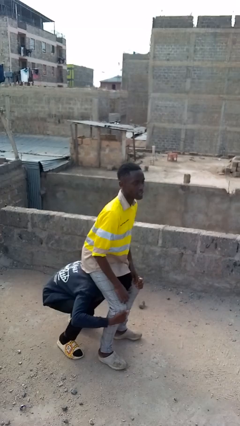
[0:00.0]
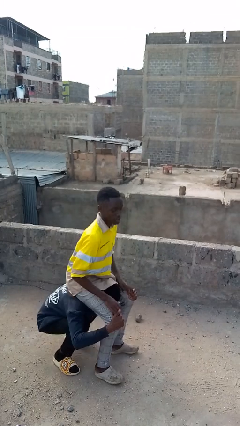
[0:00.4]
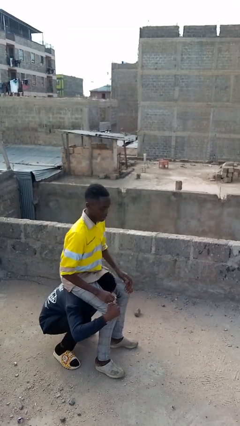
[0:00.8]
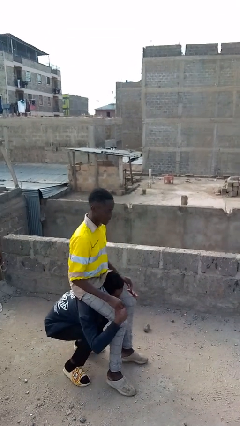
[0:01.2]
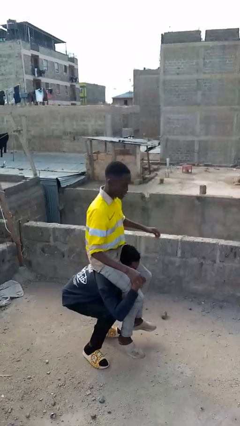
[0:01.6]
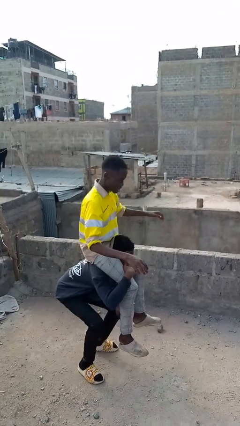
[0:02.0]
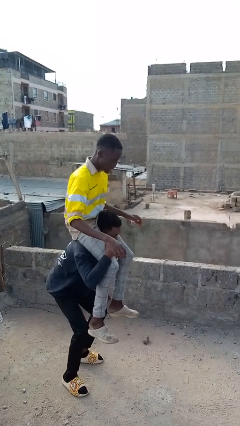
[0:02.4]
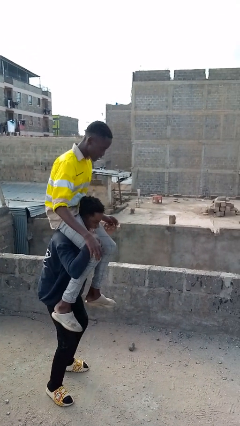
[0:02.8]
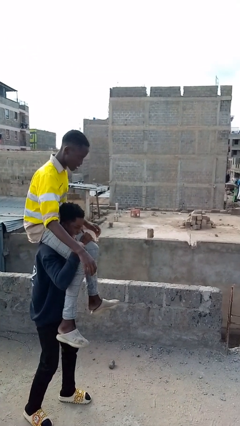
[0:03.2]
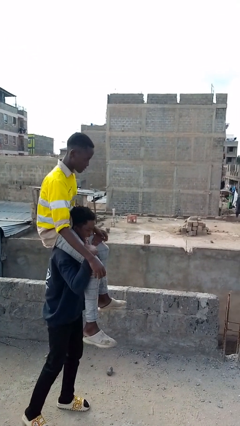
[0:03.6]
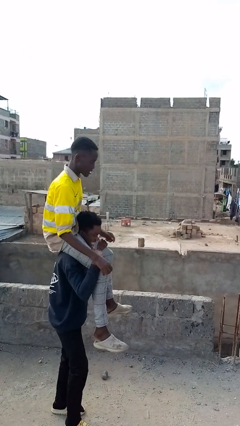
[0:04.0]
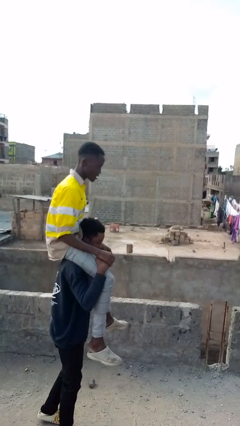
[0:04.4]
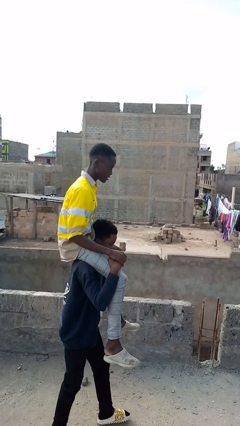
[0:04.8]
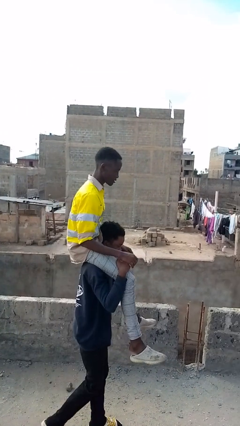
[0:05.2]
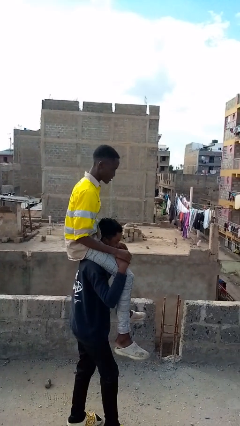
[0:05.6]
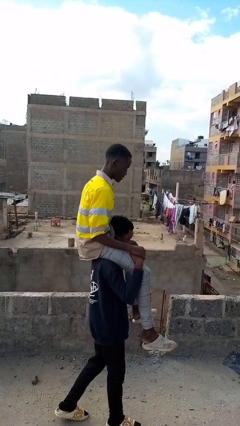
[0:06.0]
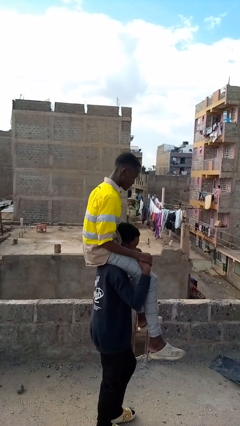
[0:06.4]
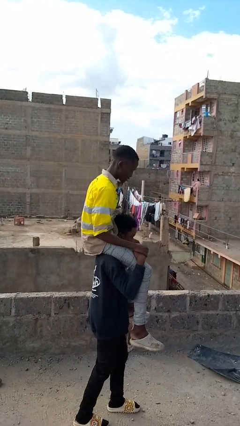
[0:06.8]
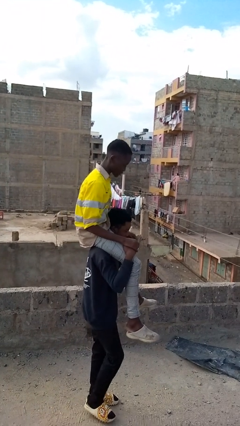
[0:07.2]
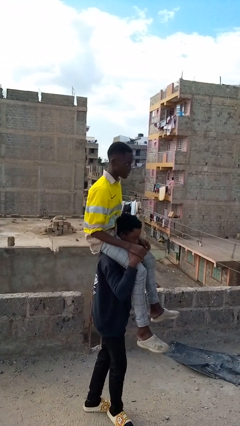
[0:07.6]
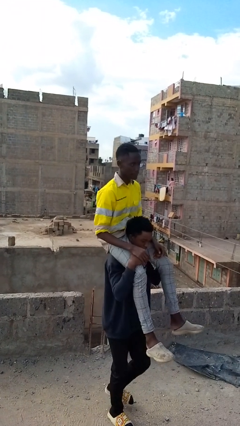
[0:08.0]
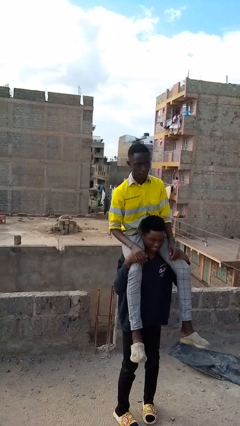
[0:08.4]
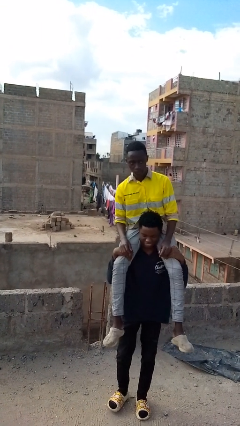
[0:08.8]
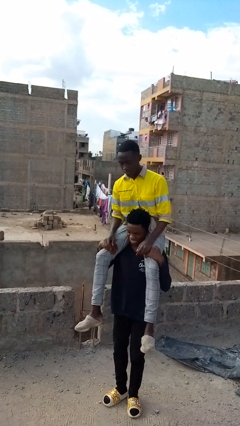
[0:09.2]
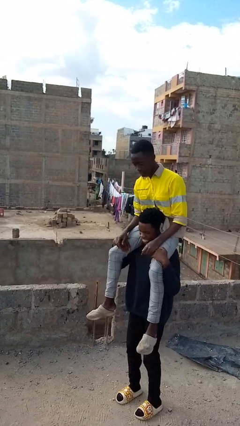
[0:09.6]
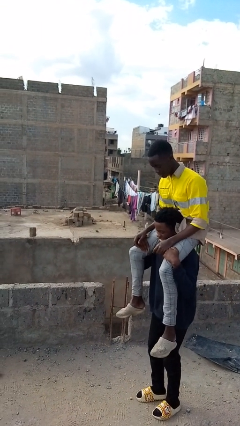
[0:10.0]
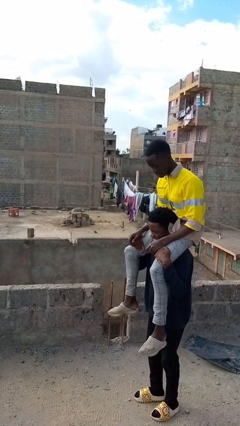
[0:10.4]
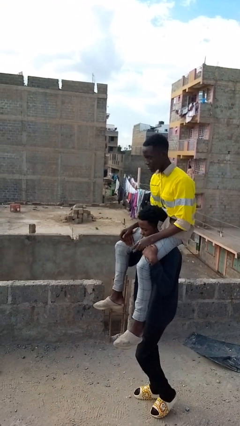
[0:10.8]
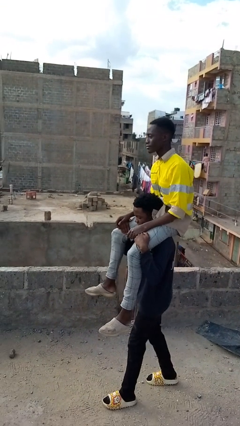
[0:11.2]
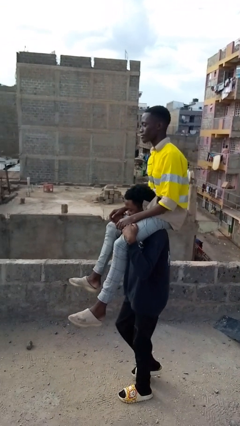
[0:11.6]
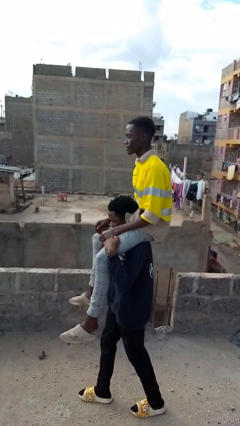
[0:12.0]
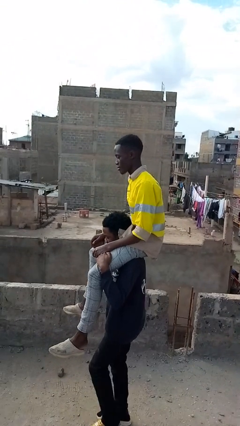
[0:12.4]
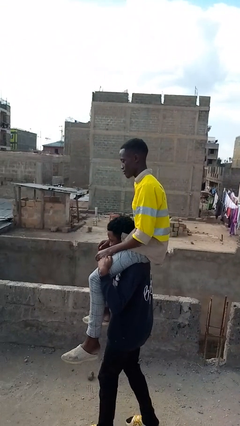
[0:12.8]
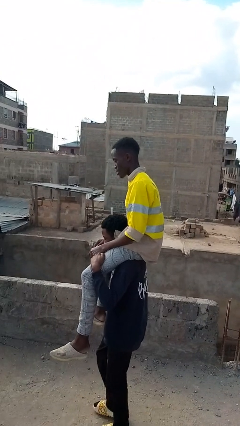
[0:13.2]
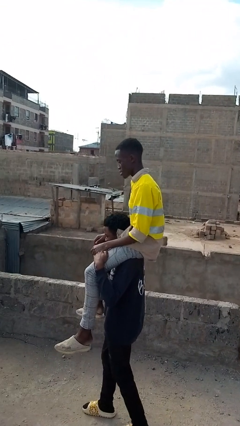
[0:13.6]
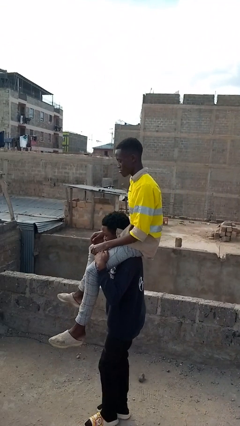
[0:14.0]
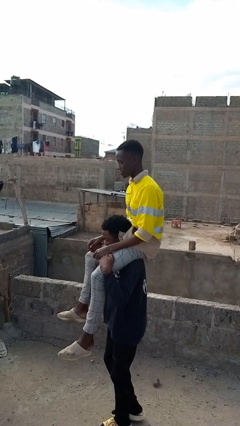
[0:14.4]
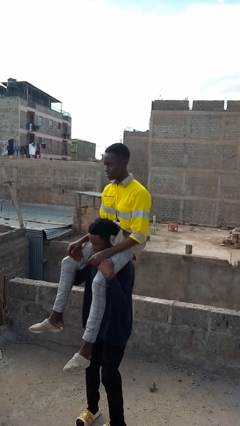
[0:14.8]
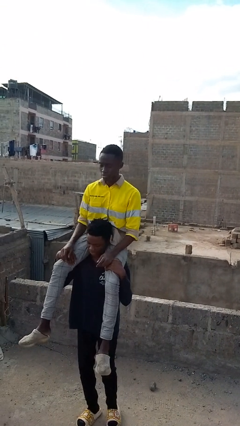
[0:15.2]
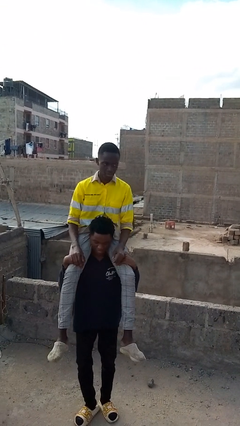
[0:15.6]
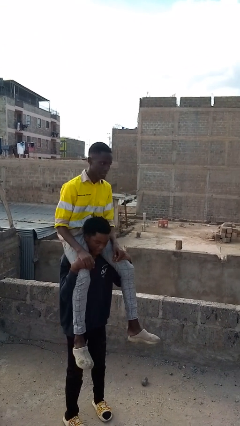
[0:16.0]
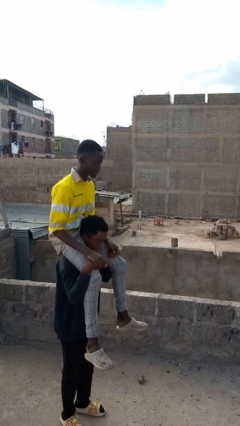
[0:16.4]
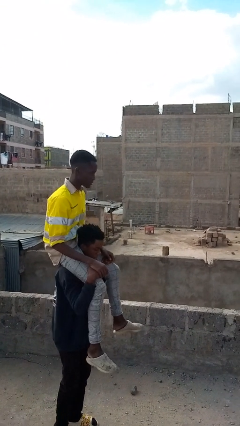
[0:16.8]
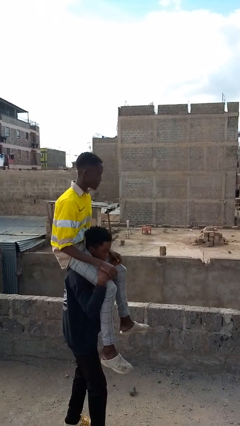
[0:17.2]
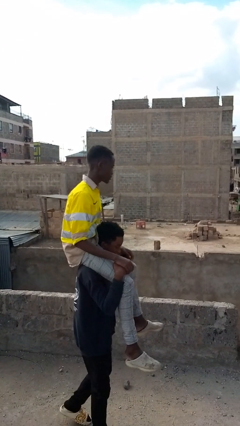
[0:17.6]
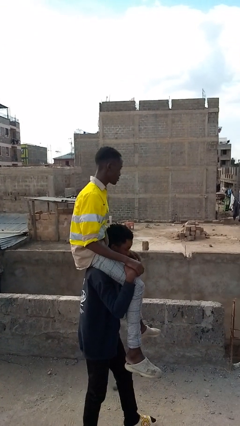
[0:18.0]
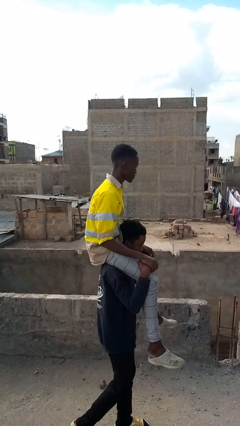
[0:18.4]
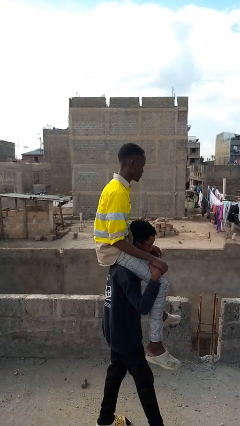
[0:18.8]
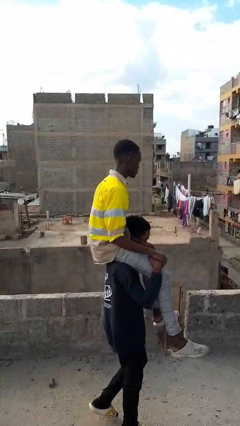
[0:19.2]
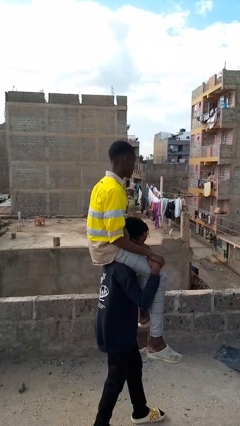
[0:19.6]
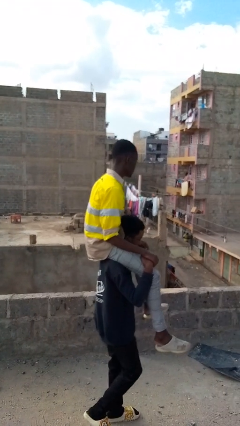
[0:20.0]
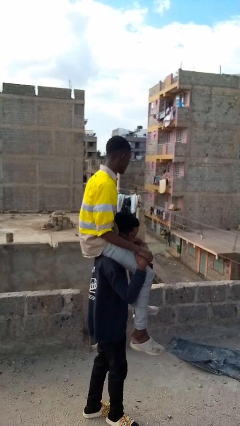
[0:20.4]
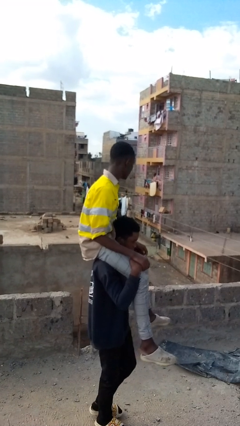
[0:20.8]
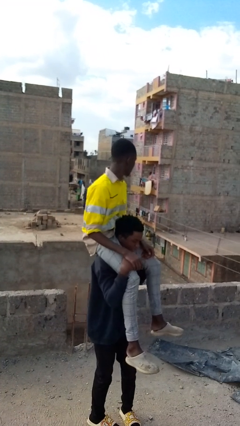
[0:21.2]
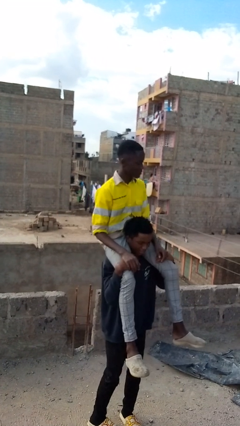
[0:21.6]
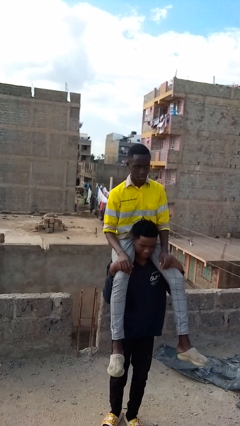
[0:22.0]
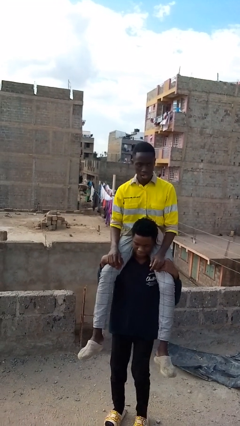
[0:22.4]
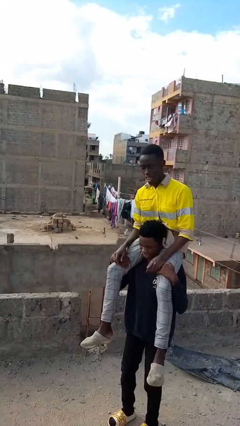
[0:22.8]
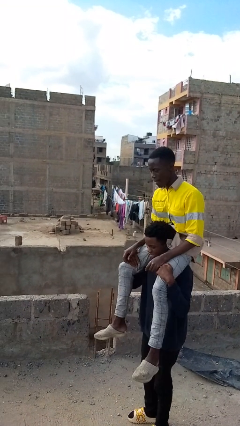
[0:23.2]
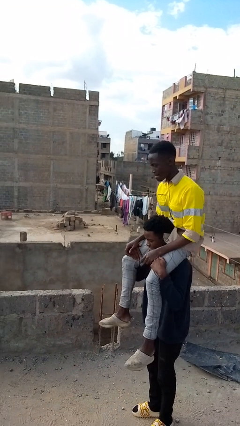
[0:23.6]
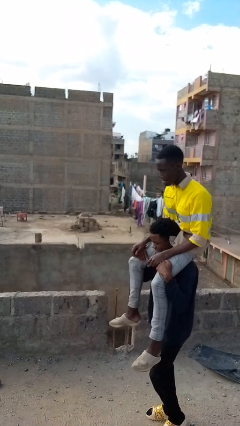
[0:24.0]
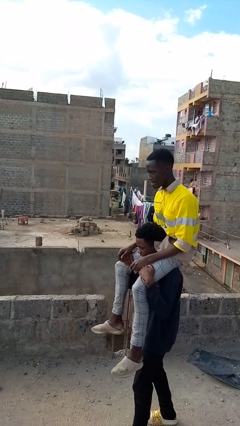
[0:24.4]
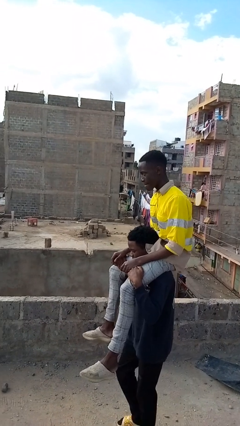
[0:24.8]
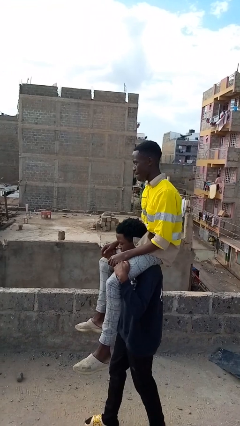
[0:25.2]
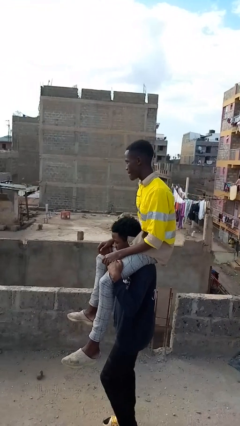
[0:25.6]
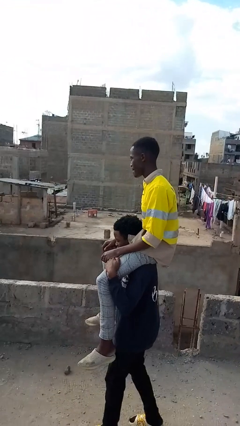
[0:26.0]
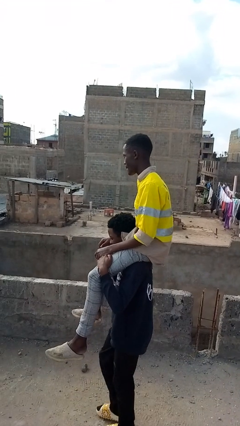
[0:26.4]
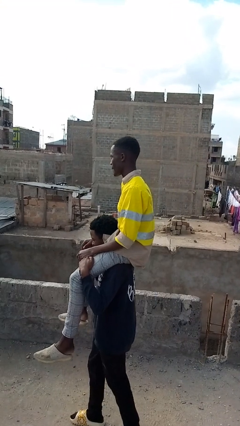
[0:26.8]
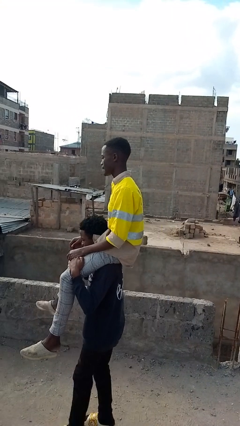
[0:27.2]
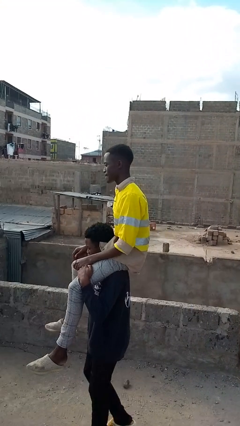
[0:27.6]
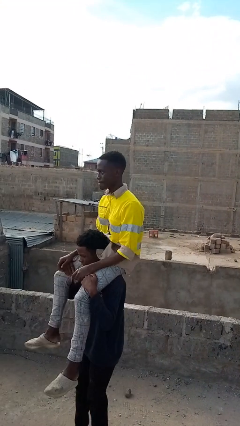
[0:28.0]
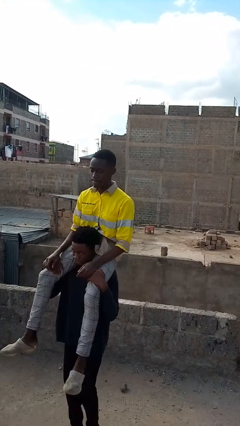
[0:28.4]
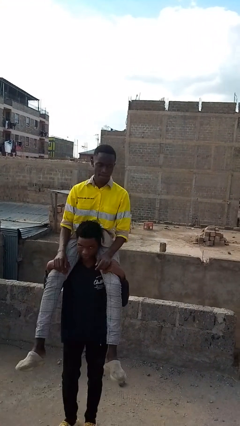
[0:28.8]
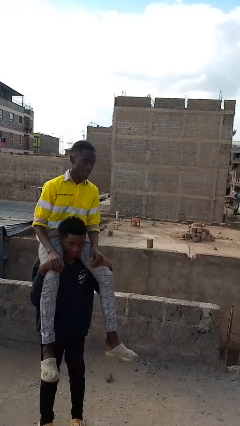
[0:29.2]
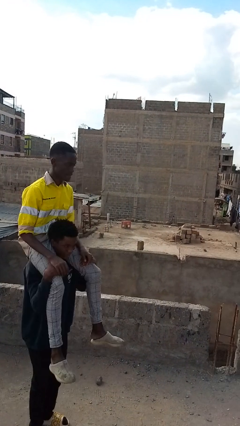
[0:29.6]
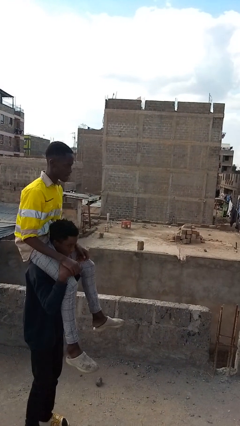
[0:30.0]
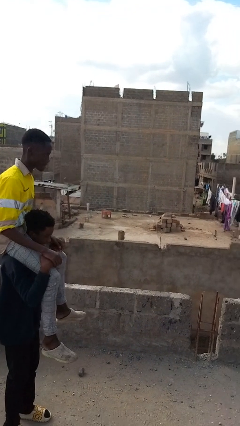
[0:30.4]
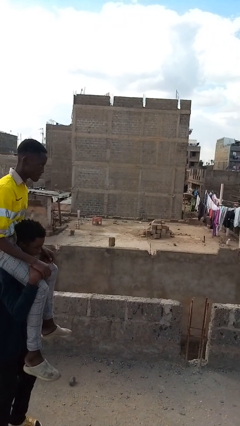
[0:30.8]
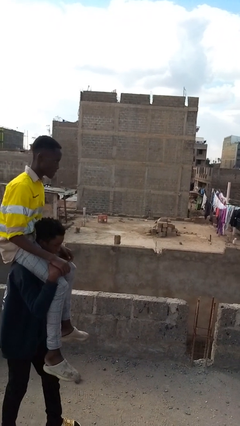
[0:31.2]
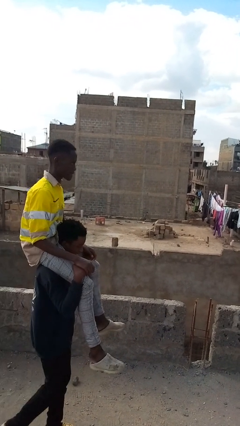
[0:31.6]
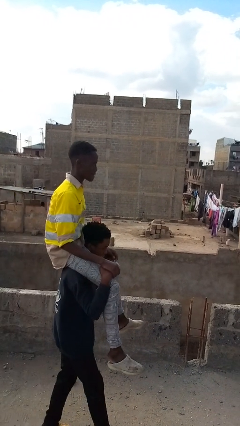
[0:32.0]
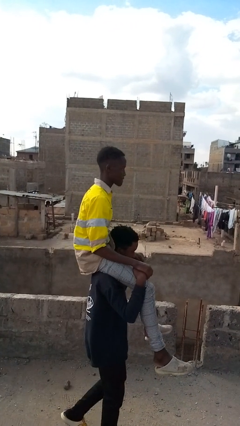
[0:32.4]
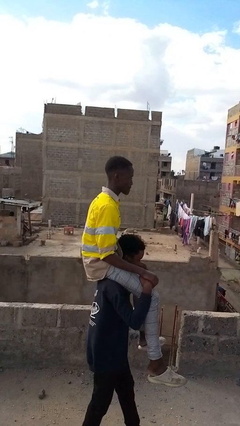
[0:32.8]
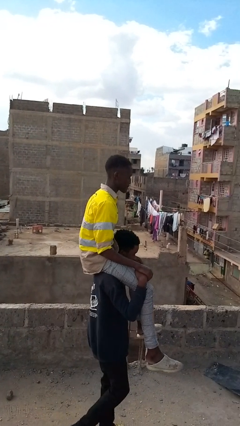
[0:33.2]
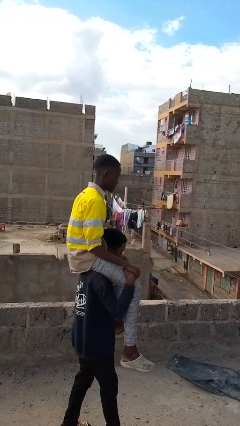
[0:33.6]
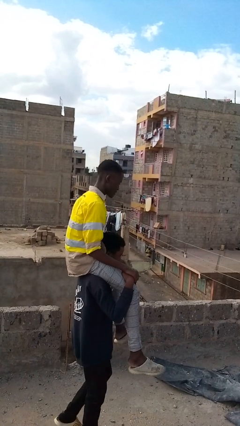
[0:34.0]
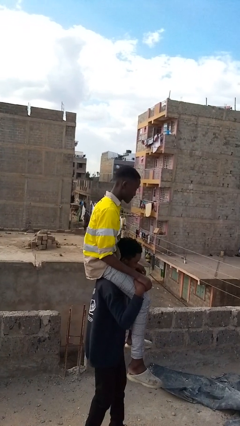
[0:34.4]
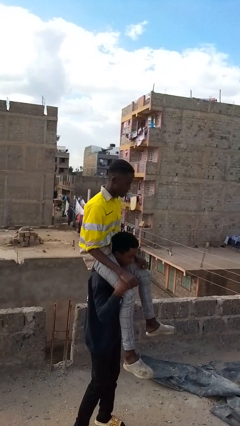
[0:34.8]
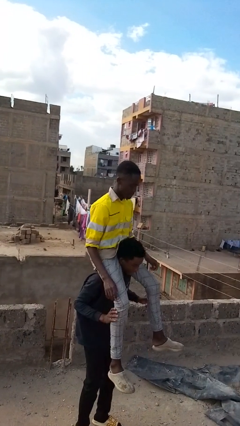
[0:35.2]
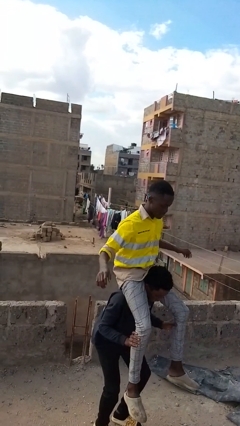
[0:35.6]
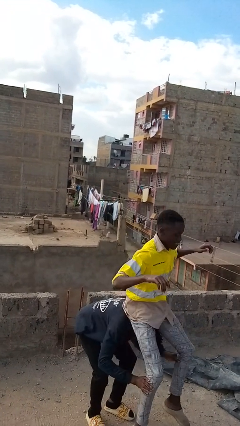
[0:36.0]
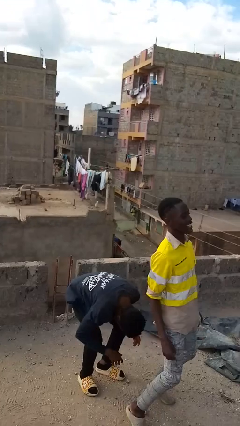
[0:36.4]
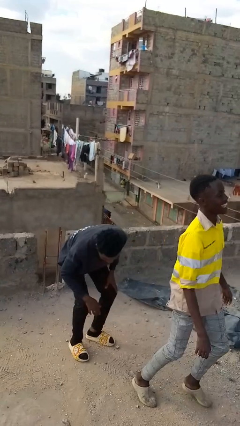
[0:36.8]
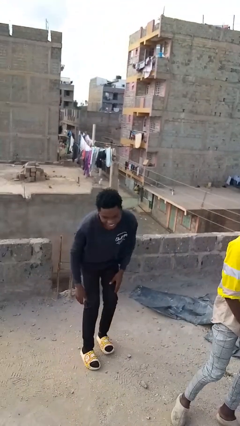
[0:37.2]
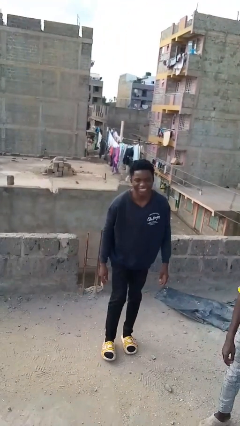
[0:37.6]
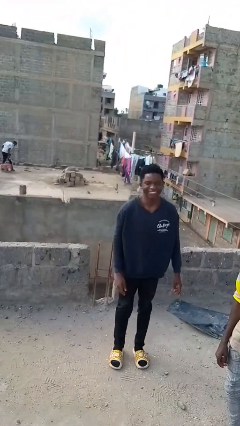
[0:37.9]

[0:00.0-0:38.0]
person carries person on shoulders
